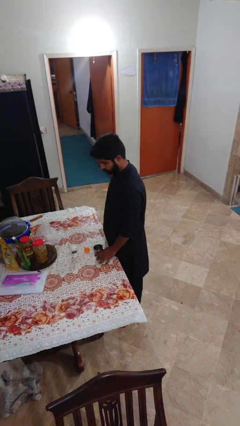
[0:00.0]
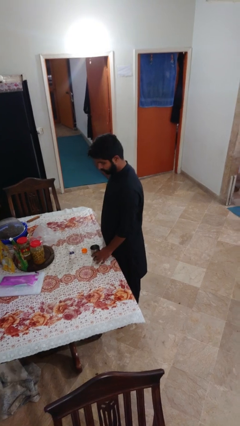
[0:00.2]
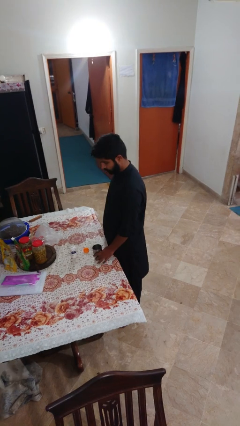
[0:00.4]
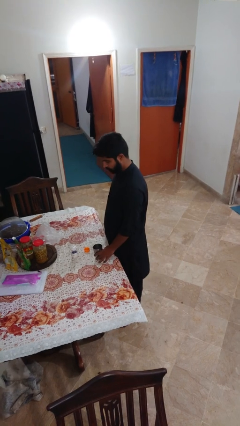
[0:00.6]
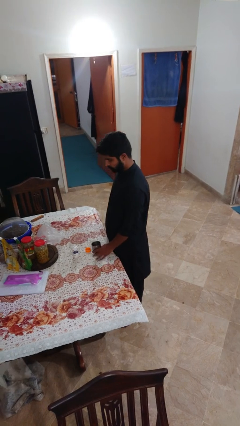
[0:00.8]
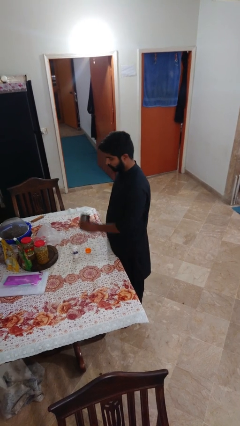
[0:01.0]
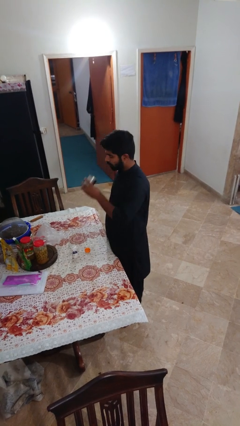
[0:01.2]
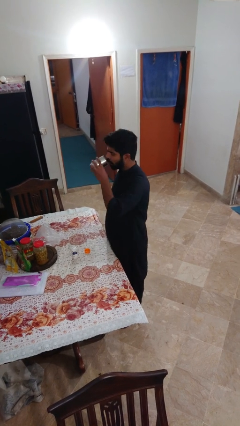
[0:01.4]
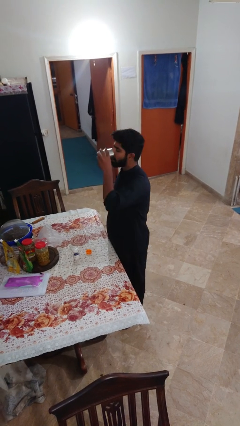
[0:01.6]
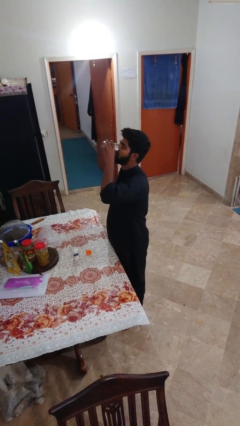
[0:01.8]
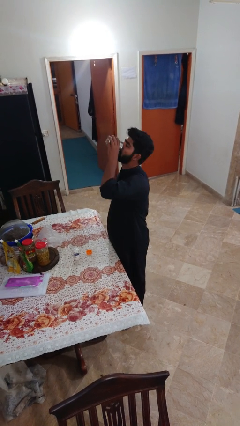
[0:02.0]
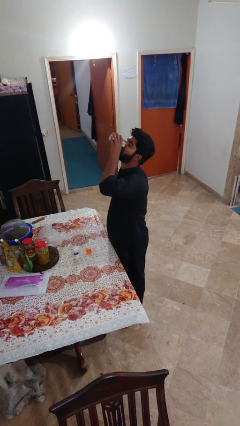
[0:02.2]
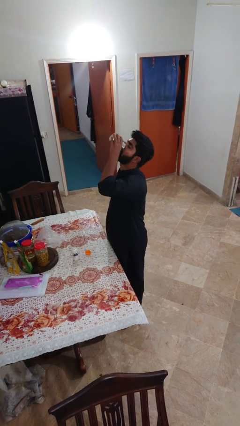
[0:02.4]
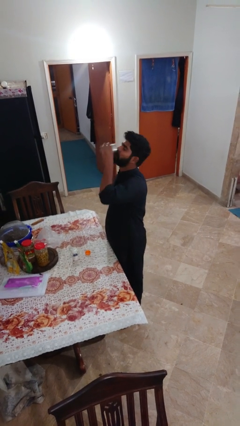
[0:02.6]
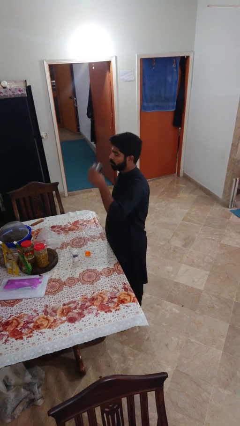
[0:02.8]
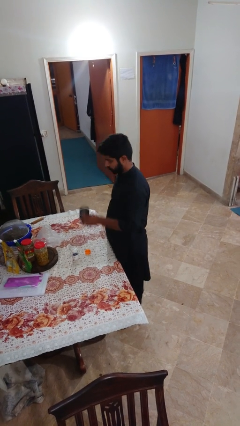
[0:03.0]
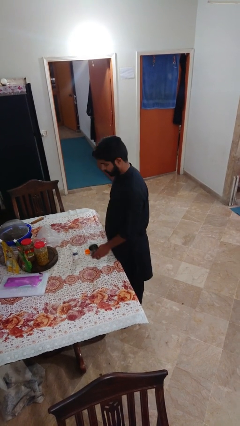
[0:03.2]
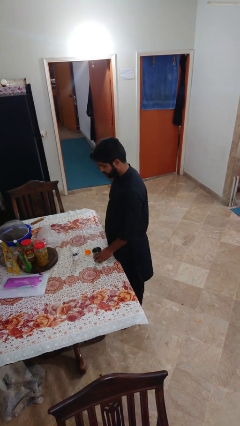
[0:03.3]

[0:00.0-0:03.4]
person drinks from cup

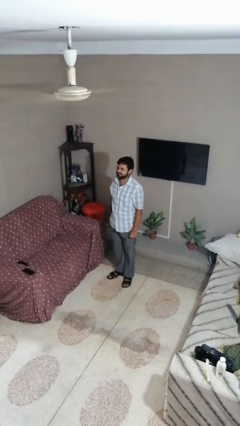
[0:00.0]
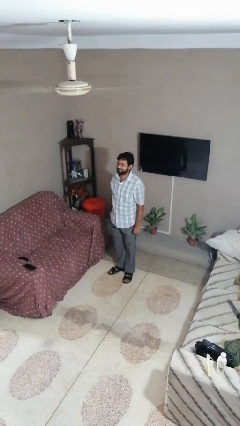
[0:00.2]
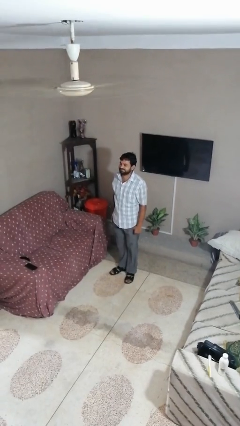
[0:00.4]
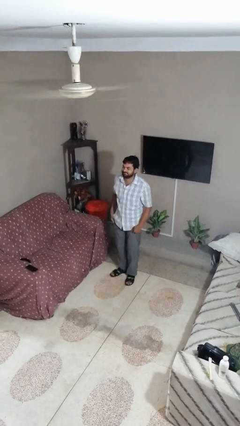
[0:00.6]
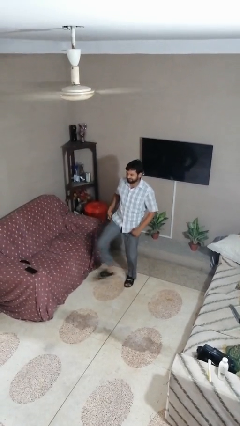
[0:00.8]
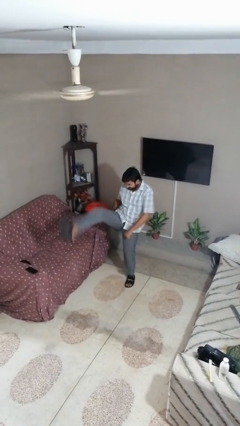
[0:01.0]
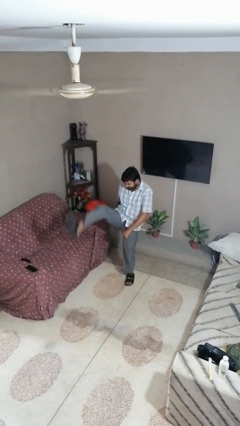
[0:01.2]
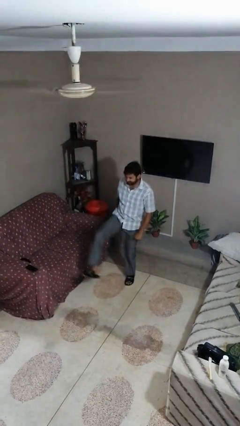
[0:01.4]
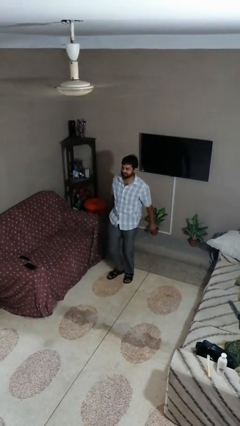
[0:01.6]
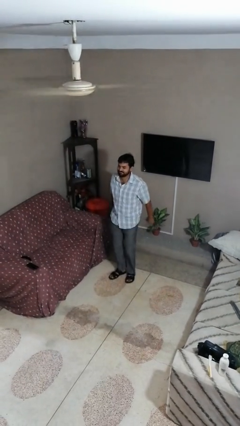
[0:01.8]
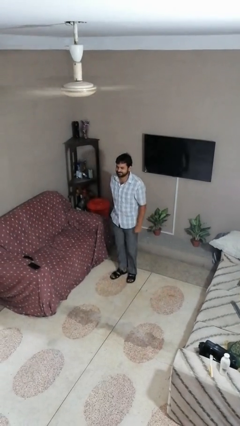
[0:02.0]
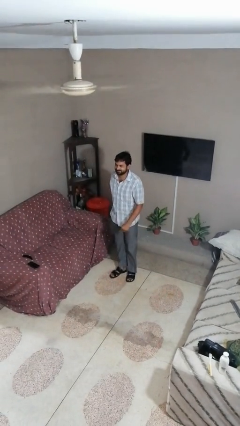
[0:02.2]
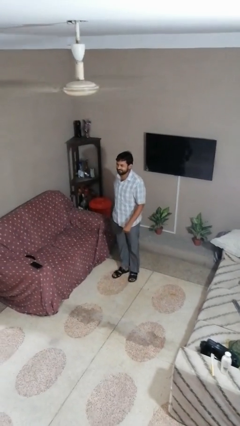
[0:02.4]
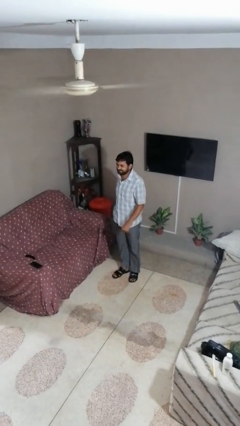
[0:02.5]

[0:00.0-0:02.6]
person karate kicks

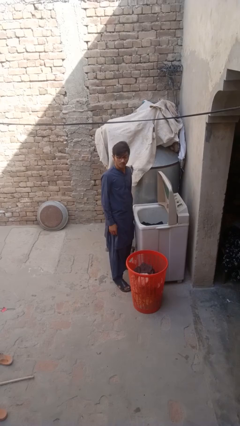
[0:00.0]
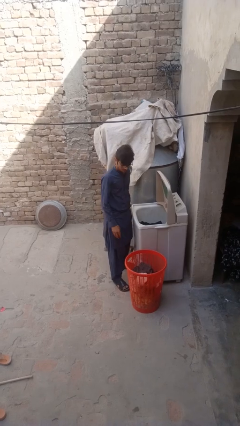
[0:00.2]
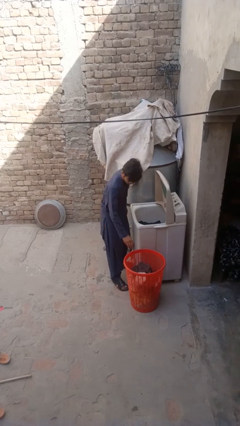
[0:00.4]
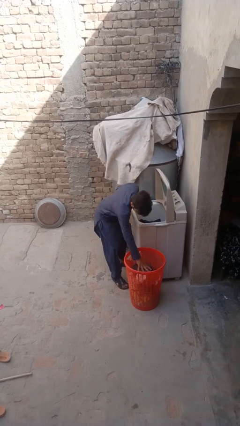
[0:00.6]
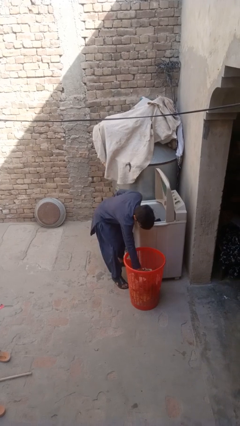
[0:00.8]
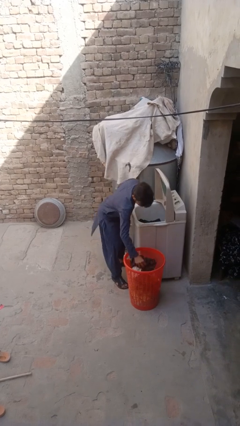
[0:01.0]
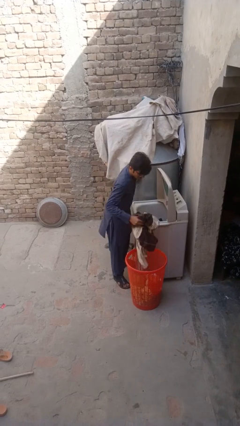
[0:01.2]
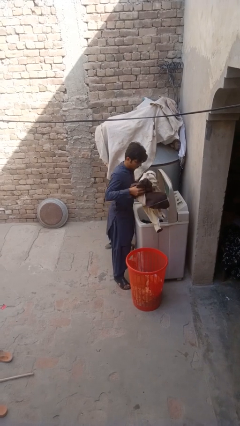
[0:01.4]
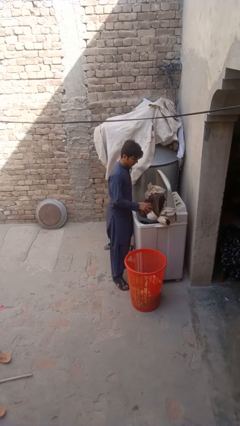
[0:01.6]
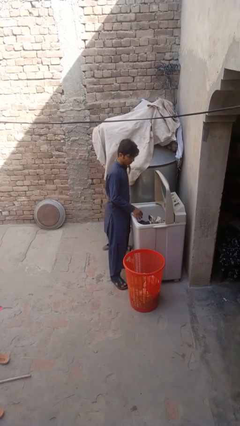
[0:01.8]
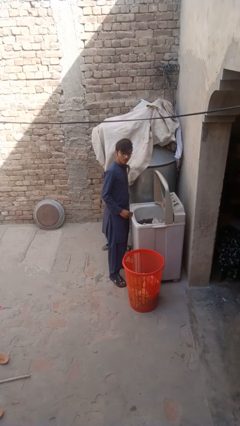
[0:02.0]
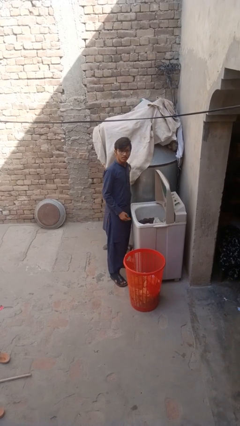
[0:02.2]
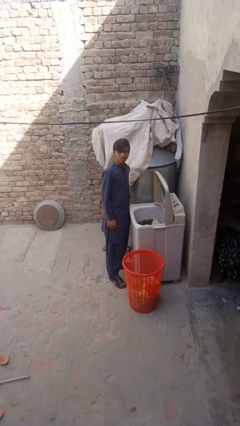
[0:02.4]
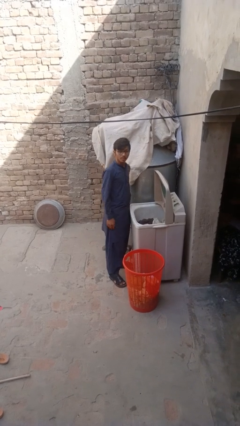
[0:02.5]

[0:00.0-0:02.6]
person loads clotheswasher

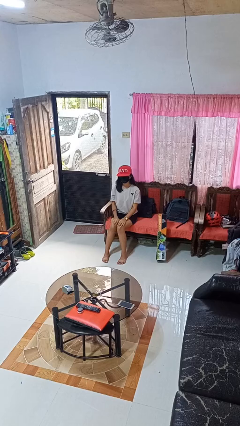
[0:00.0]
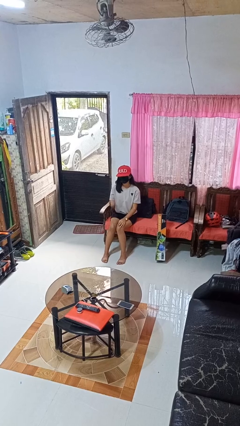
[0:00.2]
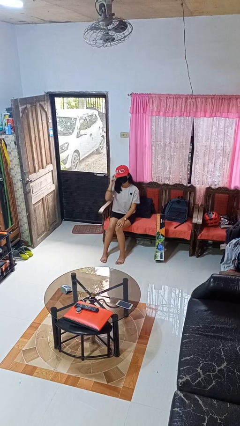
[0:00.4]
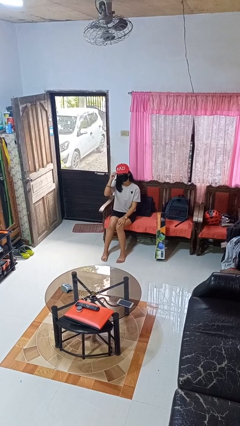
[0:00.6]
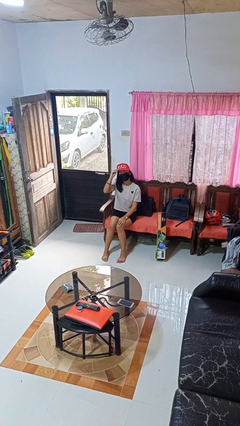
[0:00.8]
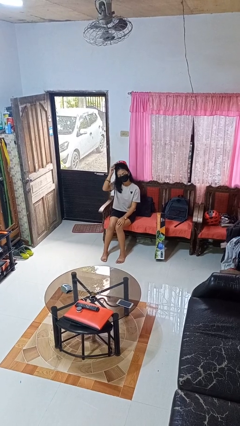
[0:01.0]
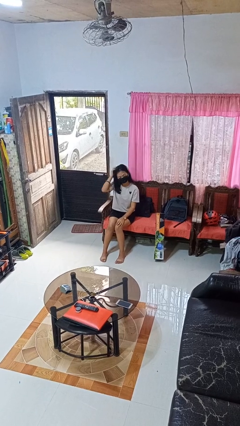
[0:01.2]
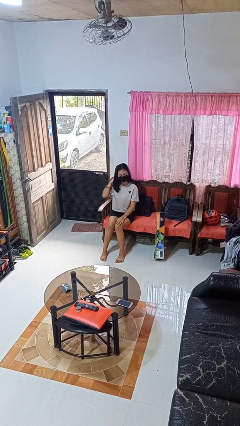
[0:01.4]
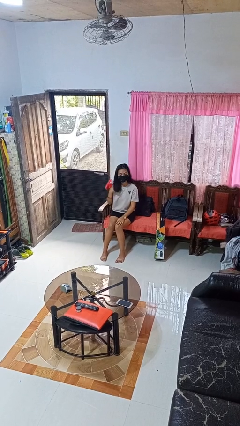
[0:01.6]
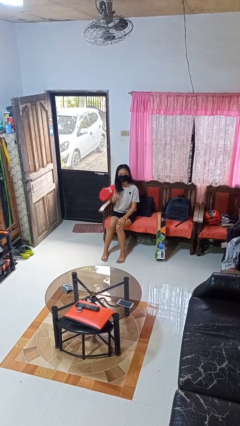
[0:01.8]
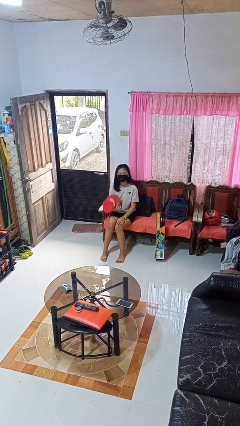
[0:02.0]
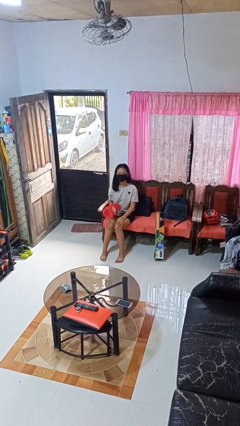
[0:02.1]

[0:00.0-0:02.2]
person takes off hat

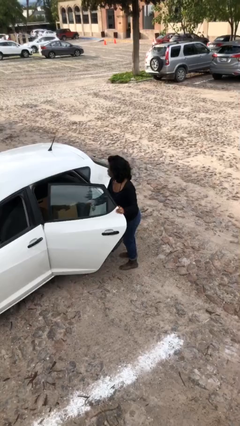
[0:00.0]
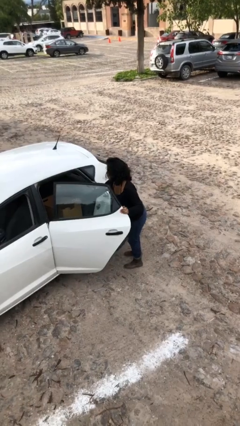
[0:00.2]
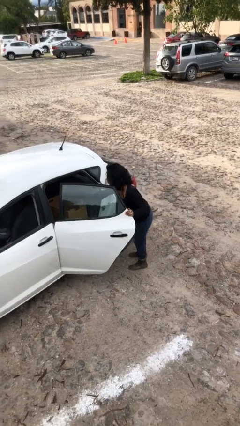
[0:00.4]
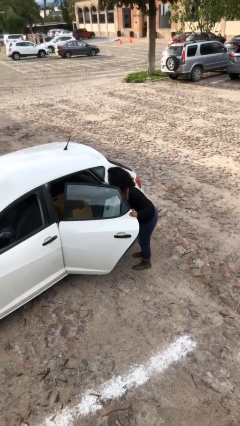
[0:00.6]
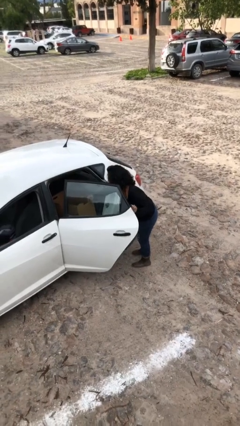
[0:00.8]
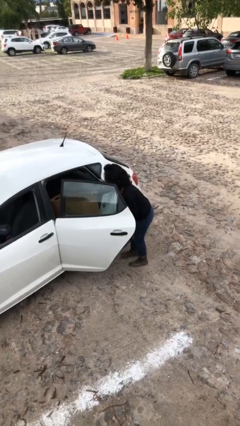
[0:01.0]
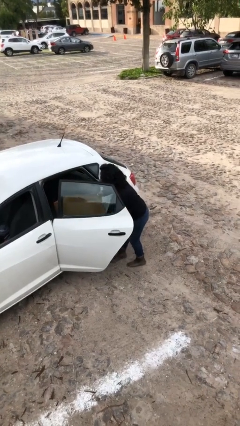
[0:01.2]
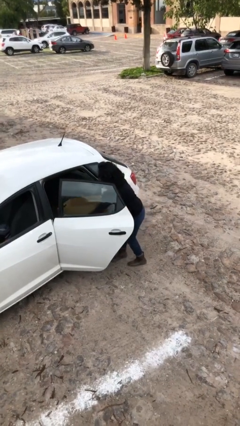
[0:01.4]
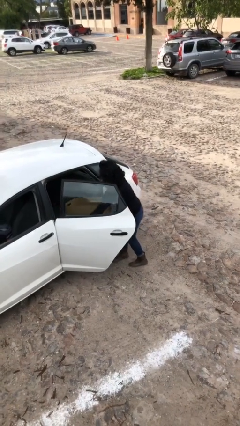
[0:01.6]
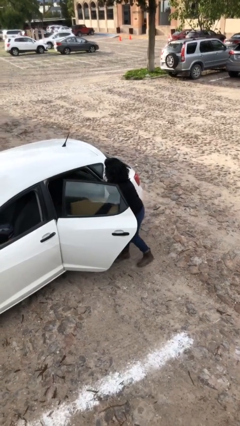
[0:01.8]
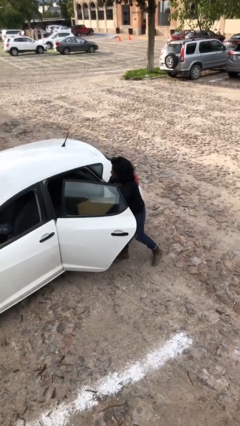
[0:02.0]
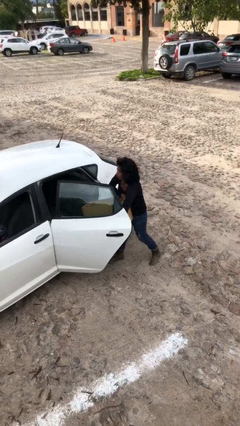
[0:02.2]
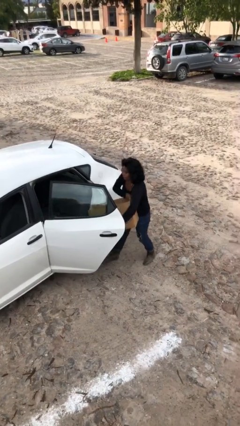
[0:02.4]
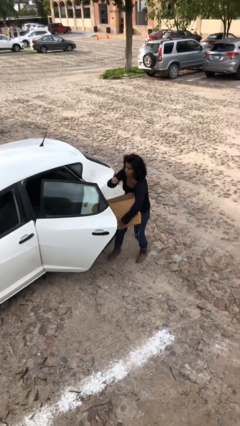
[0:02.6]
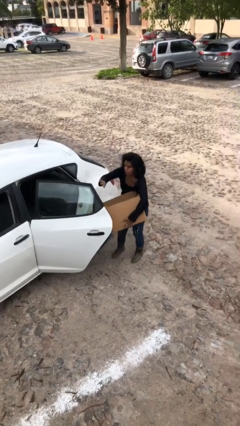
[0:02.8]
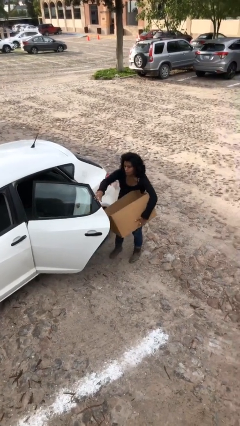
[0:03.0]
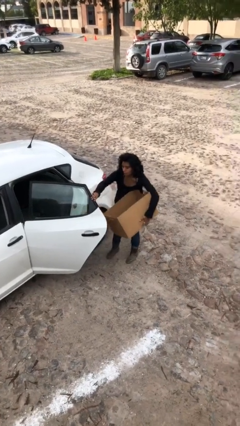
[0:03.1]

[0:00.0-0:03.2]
person unloads car

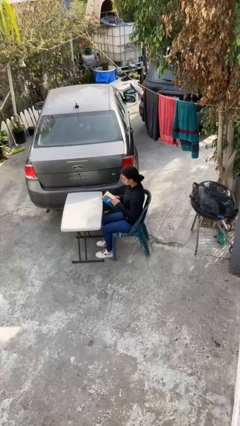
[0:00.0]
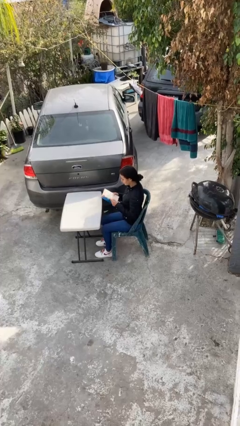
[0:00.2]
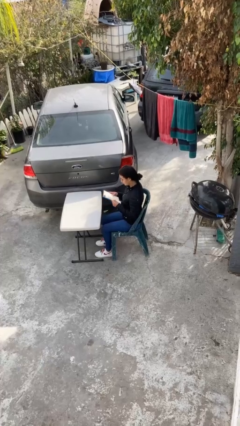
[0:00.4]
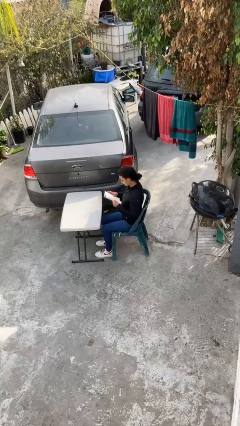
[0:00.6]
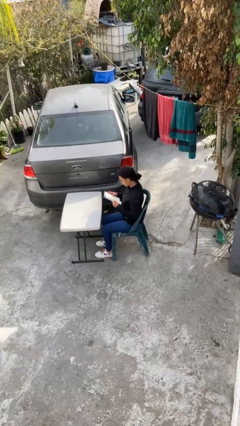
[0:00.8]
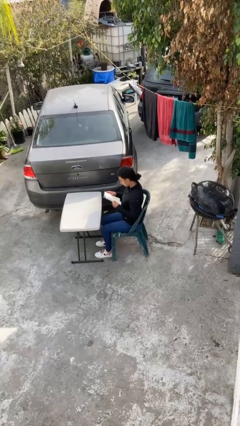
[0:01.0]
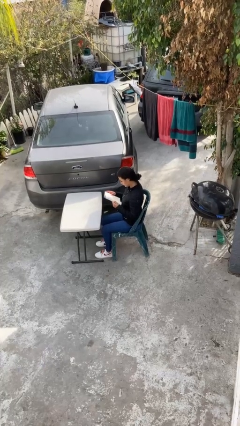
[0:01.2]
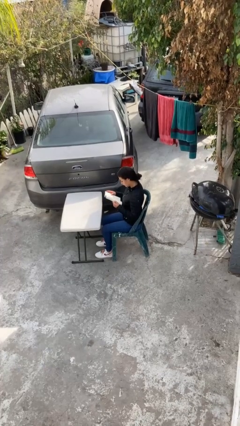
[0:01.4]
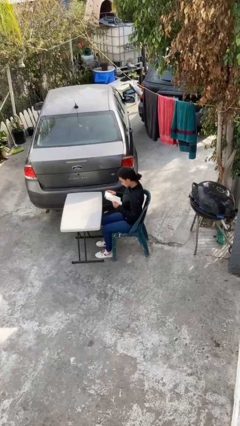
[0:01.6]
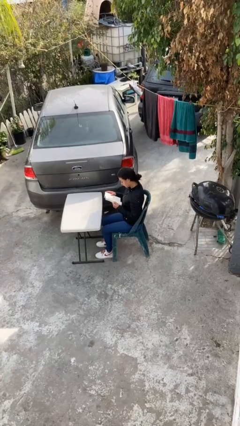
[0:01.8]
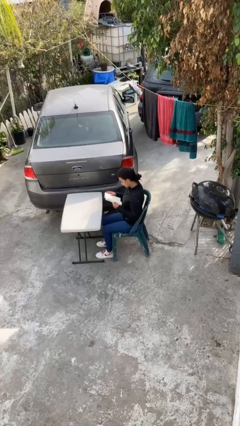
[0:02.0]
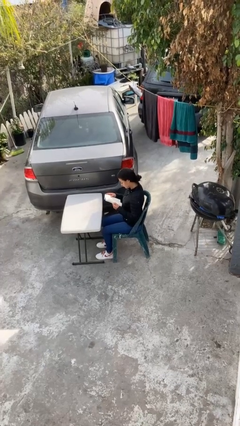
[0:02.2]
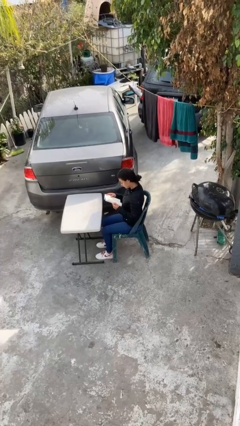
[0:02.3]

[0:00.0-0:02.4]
person reads document

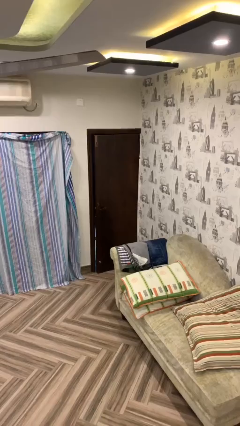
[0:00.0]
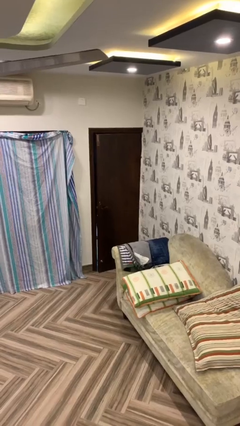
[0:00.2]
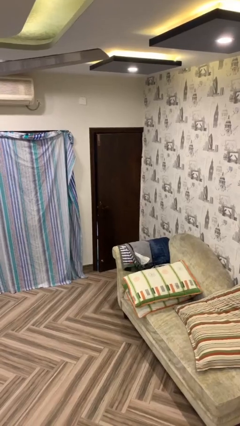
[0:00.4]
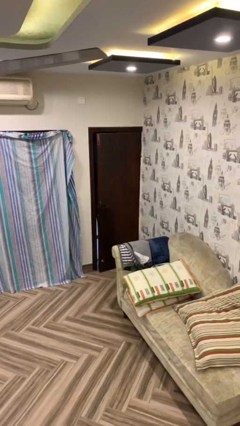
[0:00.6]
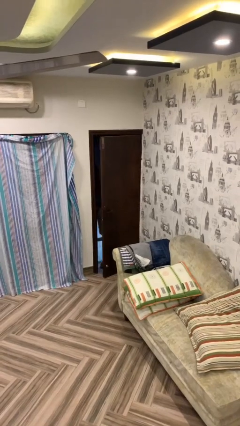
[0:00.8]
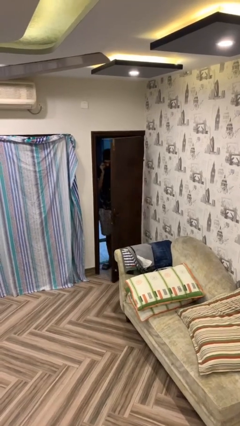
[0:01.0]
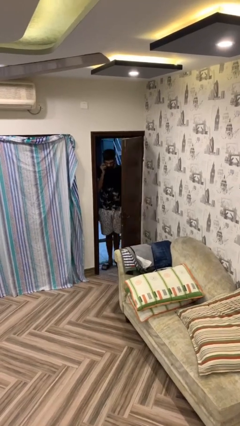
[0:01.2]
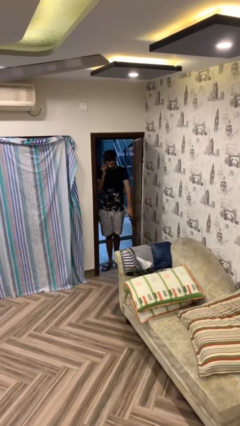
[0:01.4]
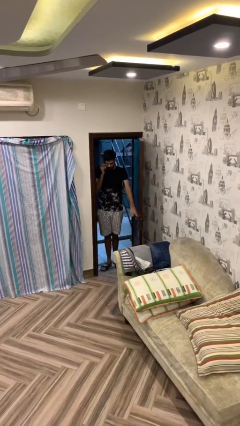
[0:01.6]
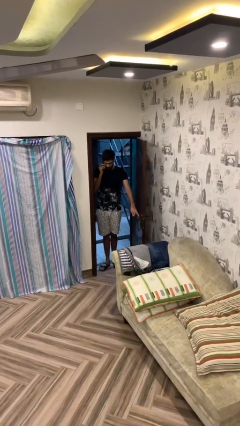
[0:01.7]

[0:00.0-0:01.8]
person opens facility door
